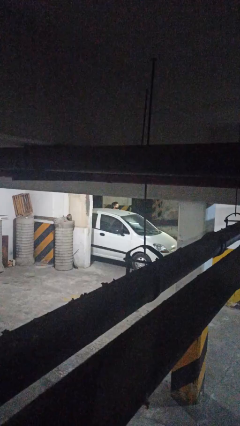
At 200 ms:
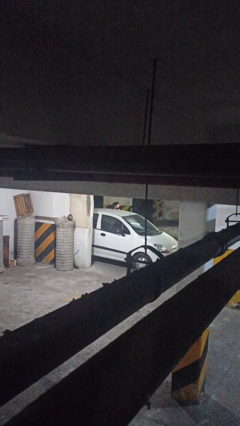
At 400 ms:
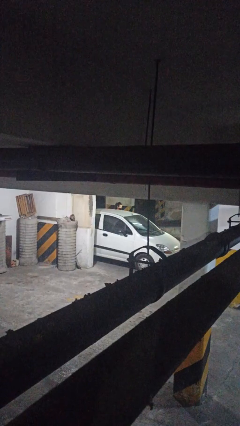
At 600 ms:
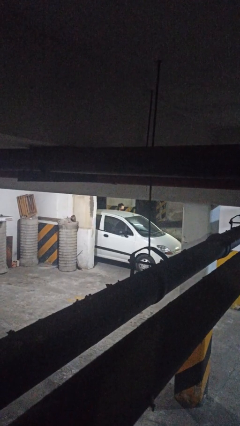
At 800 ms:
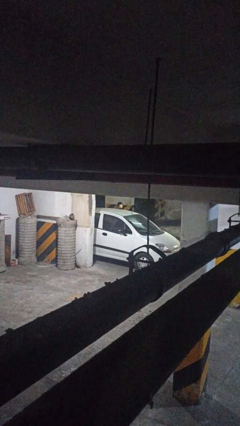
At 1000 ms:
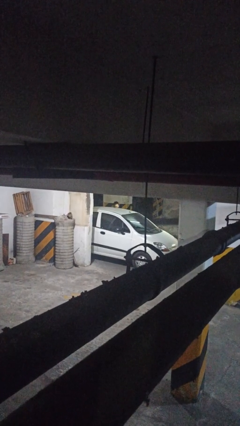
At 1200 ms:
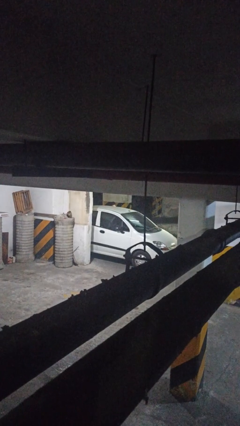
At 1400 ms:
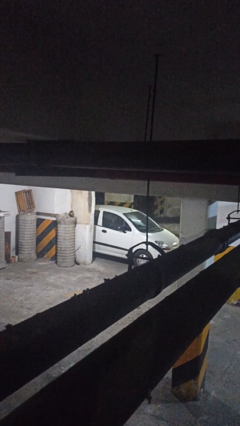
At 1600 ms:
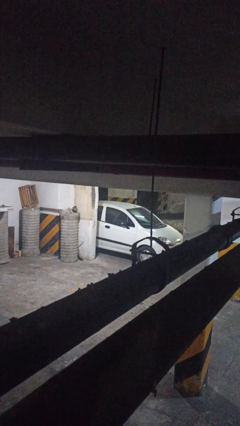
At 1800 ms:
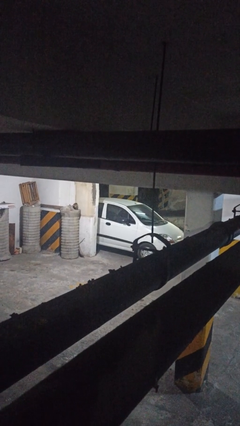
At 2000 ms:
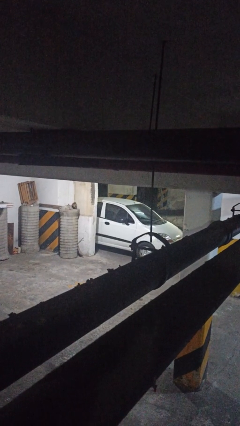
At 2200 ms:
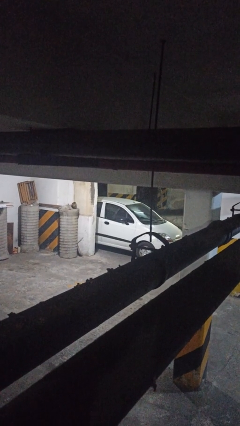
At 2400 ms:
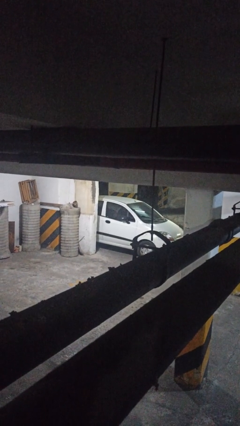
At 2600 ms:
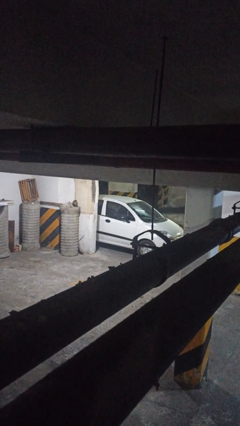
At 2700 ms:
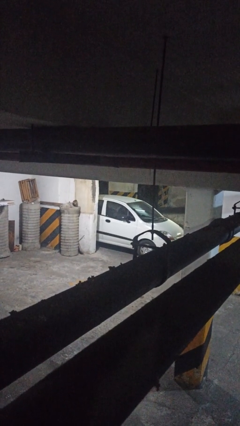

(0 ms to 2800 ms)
person enters car

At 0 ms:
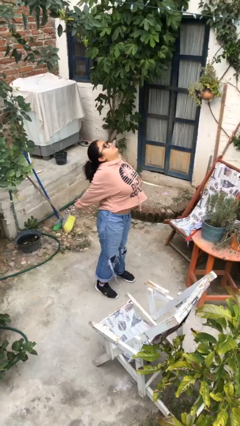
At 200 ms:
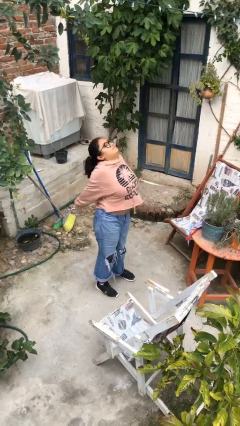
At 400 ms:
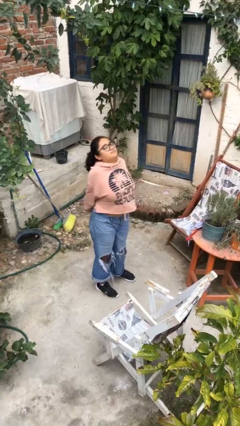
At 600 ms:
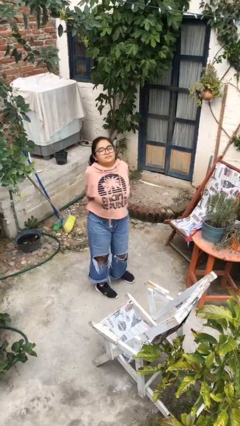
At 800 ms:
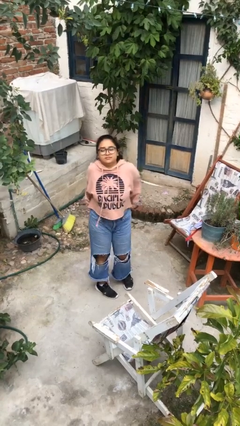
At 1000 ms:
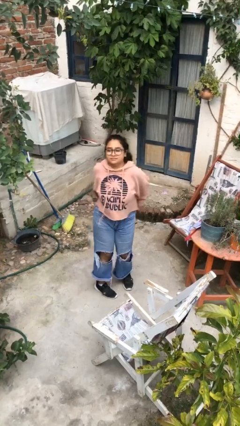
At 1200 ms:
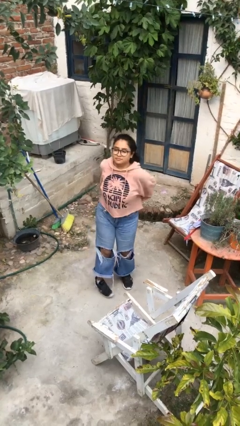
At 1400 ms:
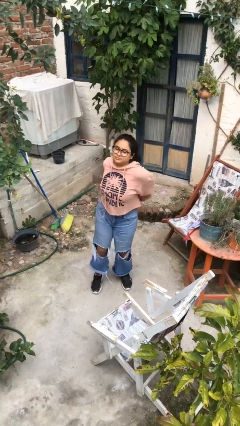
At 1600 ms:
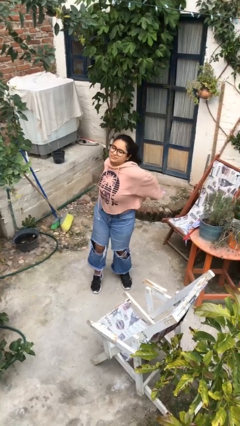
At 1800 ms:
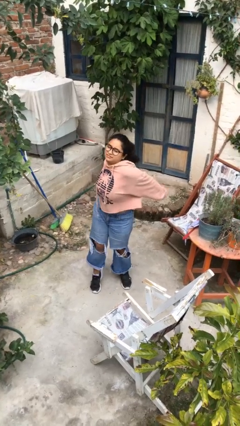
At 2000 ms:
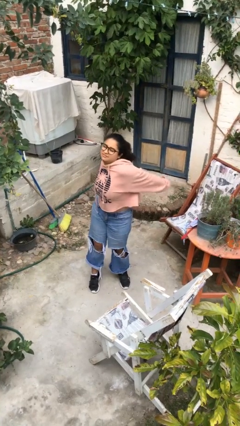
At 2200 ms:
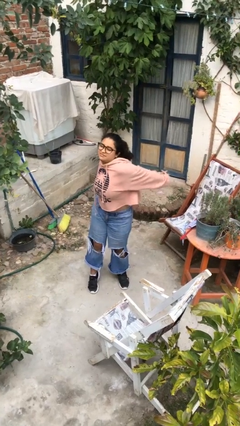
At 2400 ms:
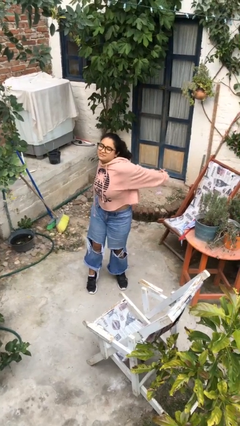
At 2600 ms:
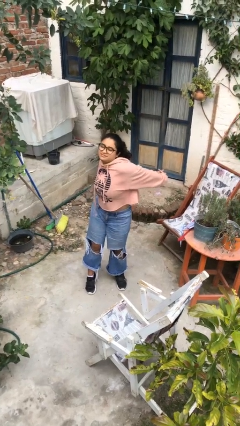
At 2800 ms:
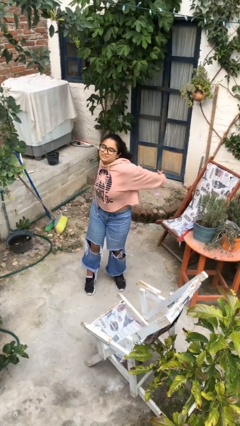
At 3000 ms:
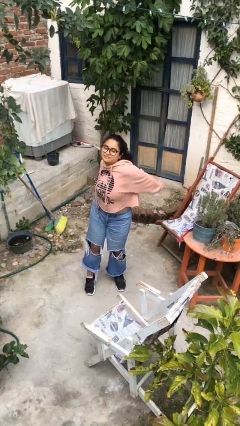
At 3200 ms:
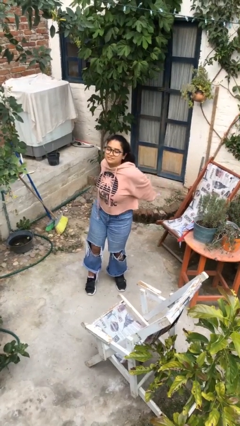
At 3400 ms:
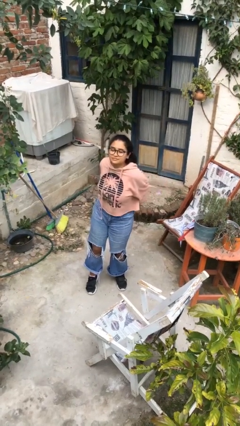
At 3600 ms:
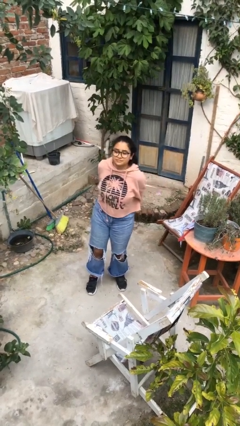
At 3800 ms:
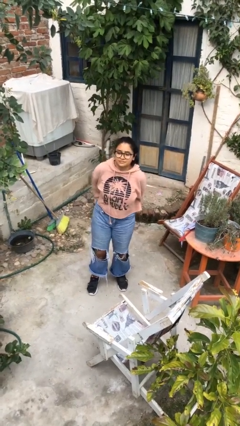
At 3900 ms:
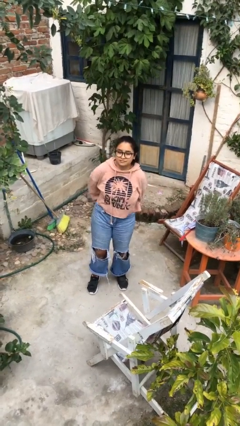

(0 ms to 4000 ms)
person stretches arms to side

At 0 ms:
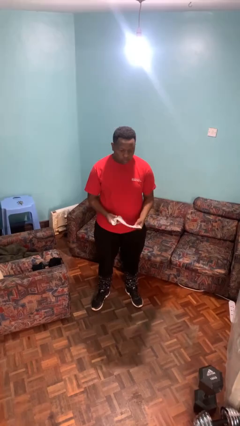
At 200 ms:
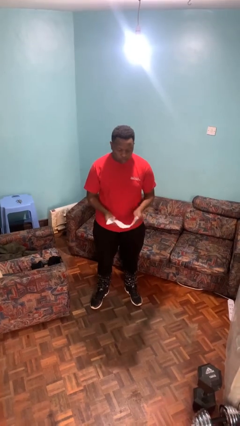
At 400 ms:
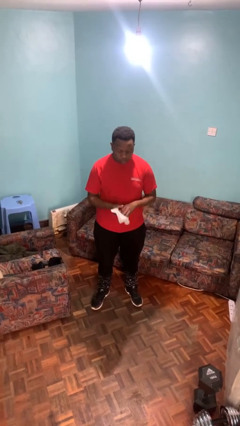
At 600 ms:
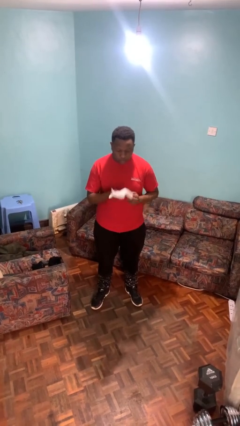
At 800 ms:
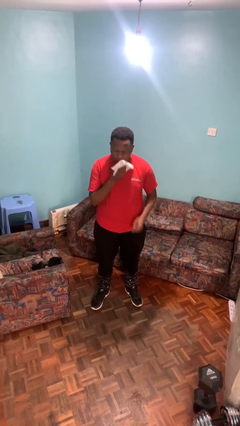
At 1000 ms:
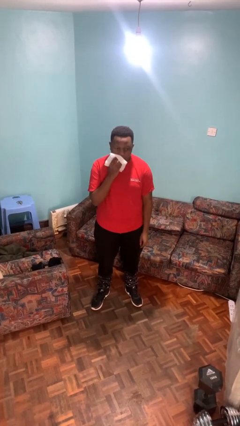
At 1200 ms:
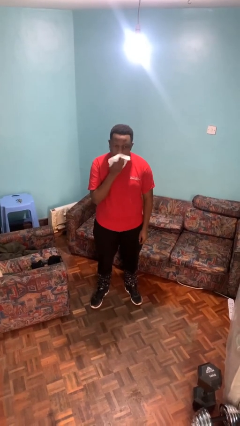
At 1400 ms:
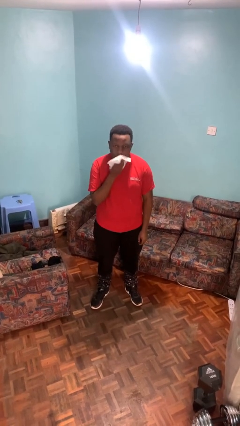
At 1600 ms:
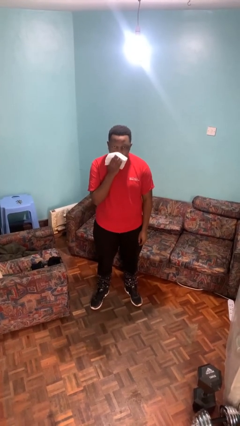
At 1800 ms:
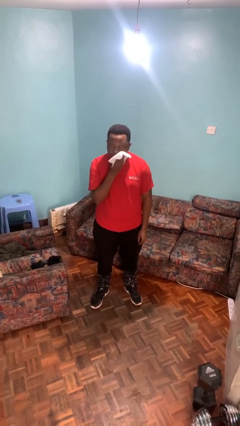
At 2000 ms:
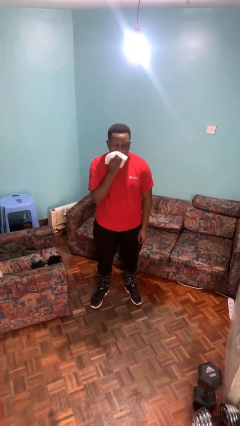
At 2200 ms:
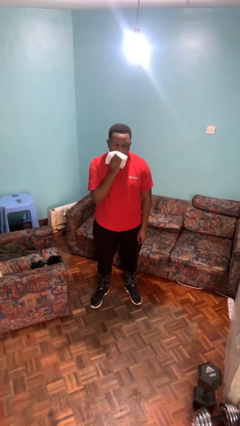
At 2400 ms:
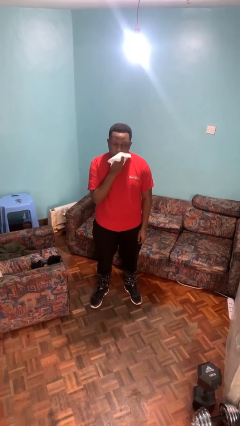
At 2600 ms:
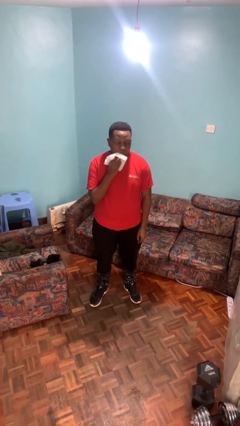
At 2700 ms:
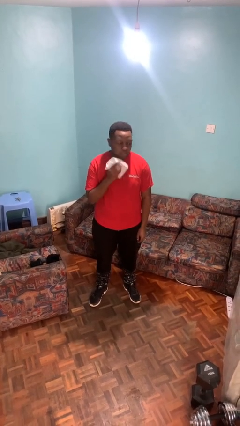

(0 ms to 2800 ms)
person wipes mouth with napkin

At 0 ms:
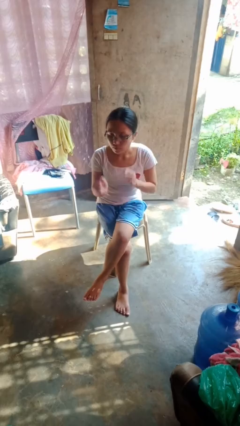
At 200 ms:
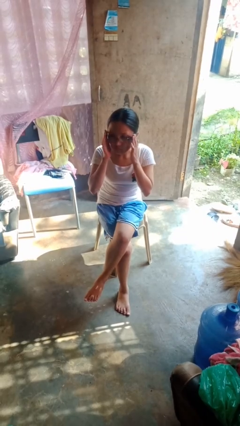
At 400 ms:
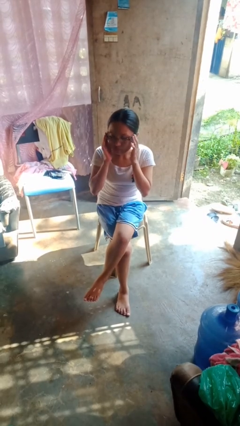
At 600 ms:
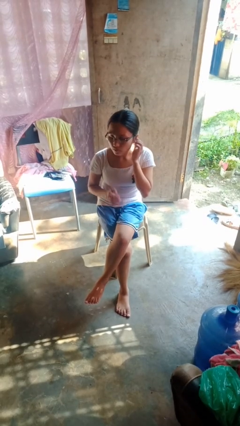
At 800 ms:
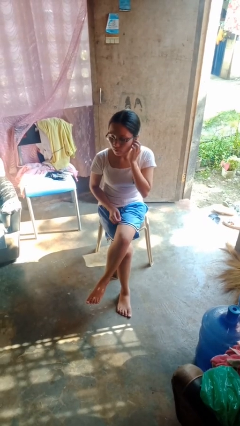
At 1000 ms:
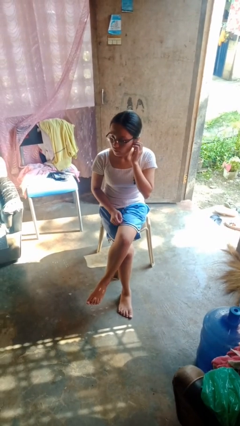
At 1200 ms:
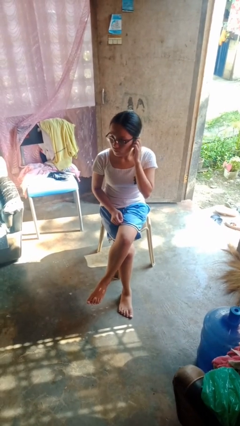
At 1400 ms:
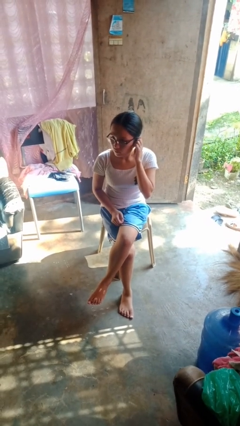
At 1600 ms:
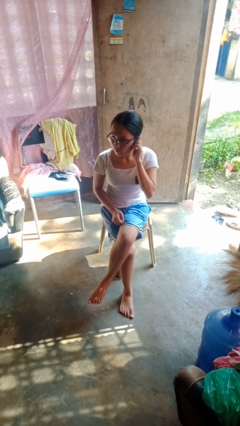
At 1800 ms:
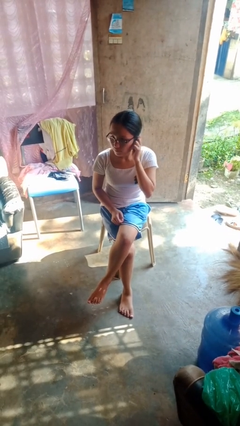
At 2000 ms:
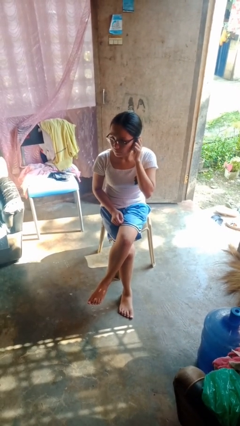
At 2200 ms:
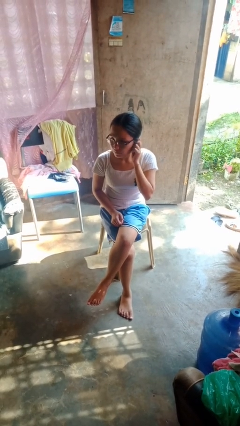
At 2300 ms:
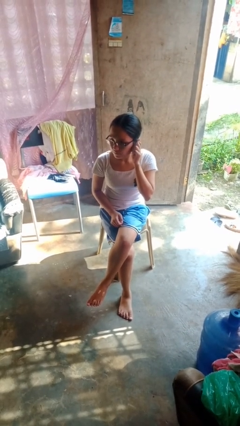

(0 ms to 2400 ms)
person touches earlobe

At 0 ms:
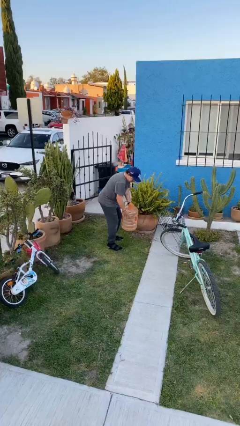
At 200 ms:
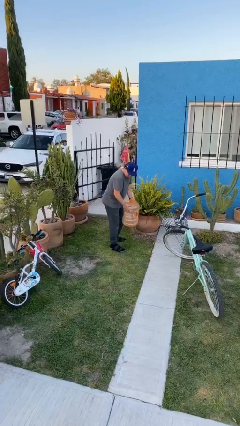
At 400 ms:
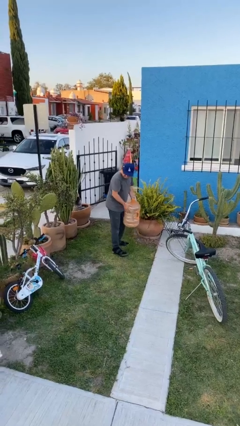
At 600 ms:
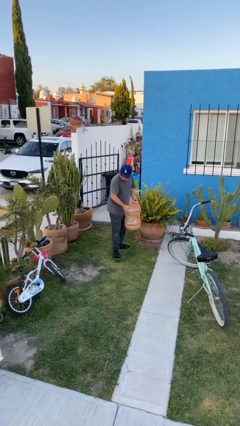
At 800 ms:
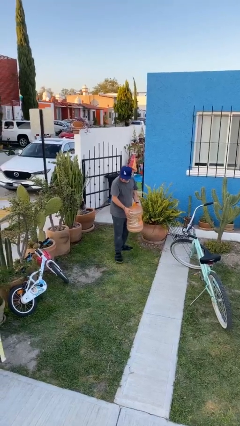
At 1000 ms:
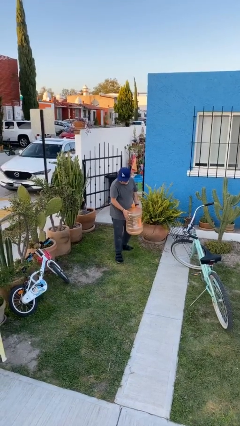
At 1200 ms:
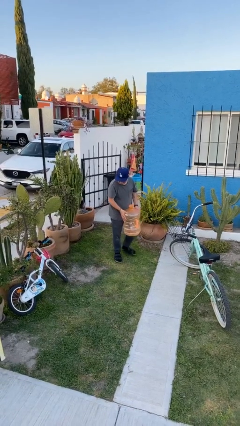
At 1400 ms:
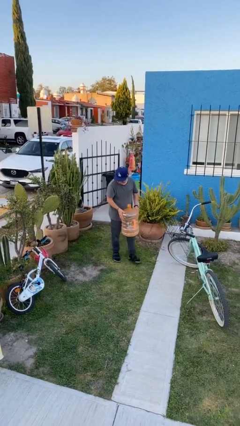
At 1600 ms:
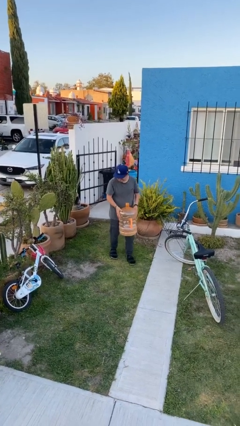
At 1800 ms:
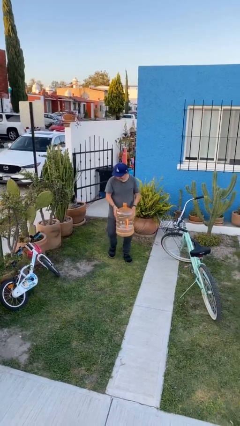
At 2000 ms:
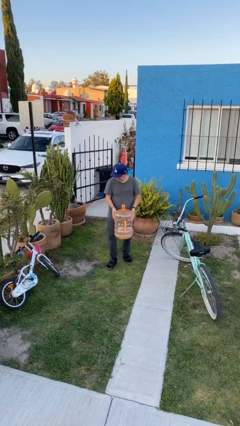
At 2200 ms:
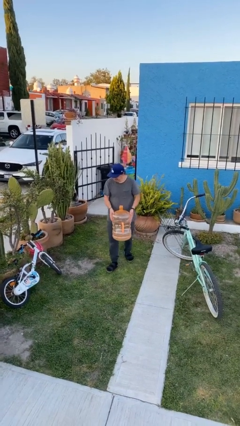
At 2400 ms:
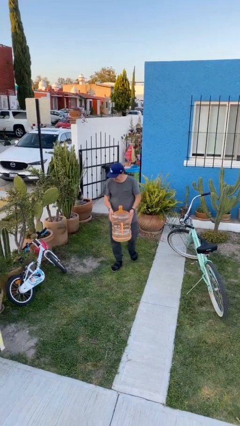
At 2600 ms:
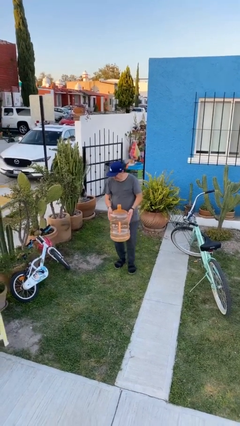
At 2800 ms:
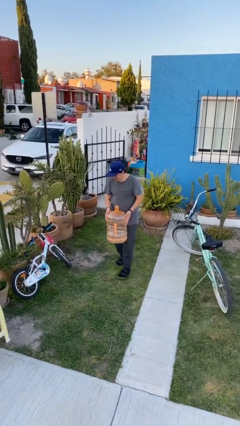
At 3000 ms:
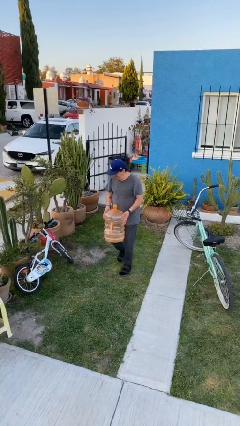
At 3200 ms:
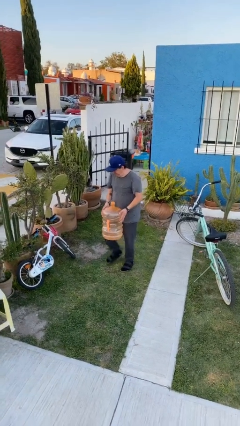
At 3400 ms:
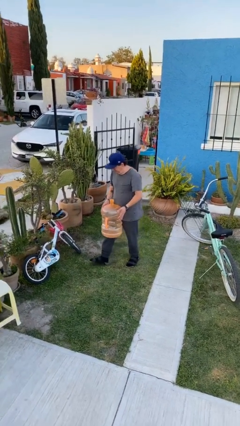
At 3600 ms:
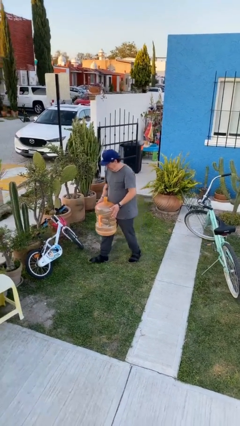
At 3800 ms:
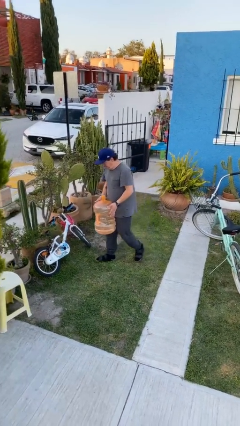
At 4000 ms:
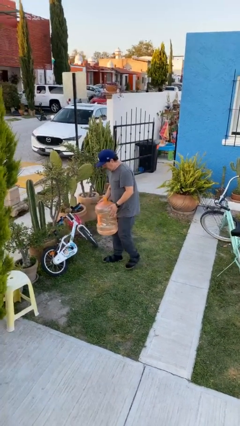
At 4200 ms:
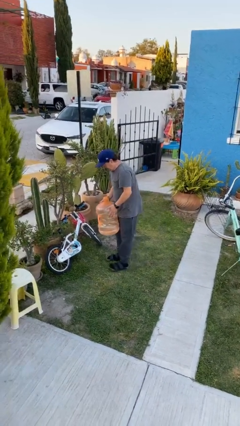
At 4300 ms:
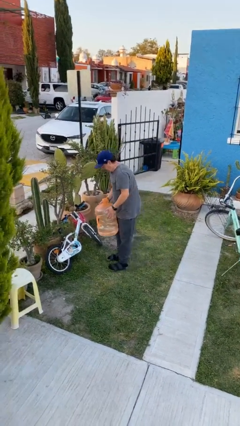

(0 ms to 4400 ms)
person carries heavy object

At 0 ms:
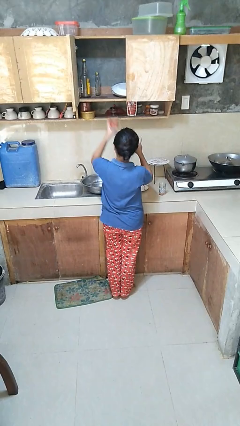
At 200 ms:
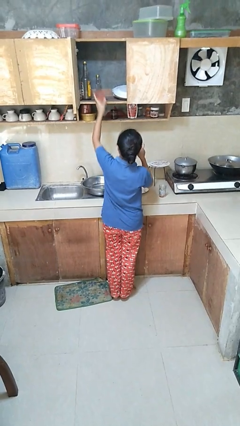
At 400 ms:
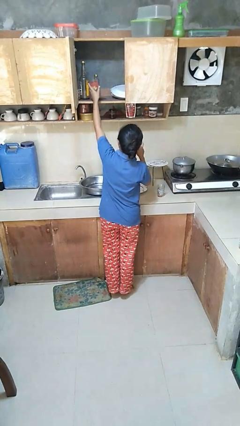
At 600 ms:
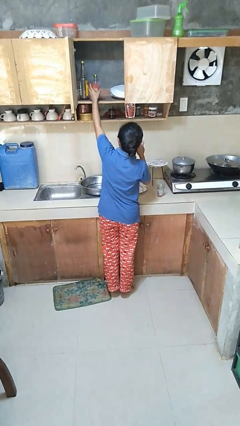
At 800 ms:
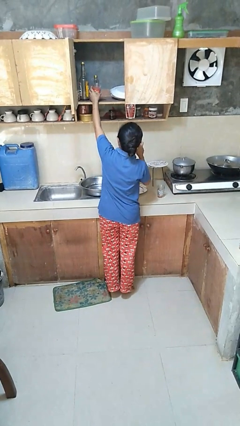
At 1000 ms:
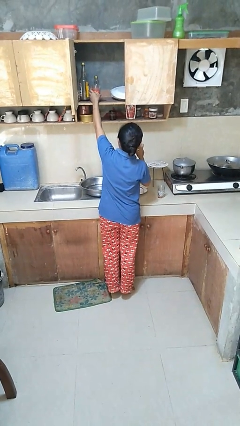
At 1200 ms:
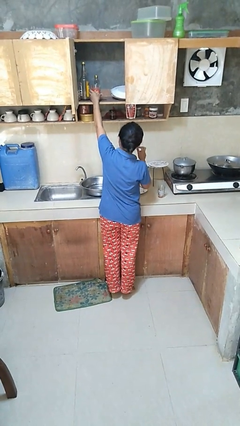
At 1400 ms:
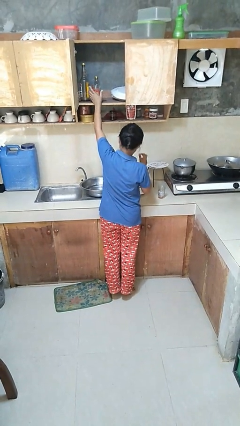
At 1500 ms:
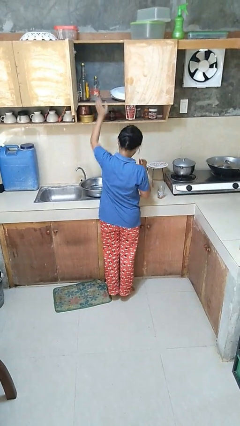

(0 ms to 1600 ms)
person puts object in cabinet
